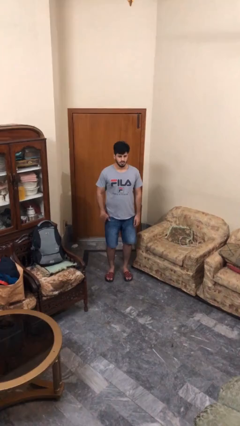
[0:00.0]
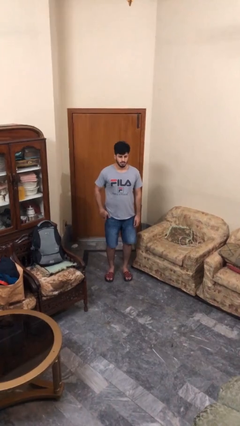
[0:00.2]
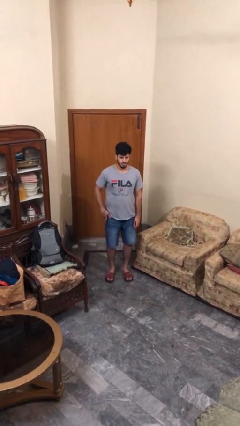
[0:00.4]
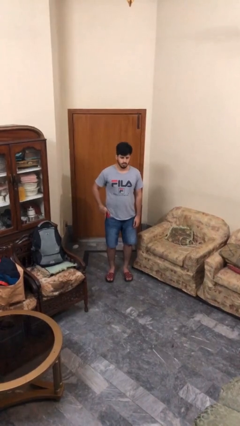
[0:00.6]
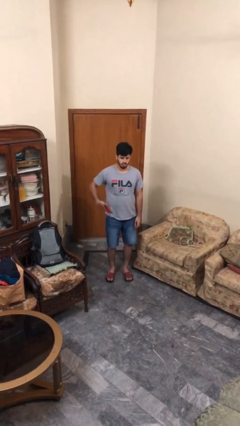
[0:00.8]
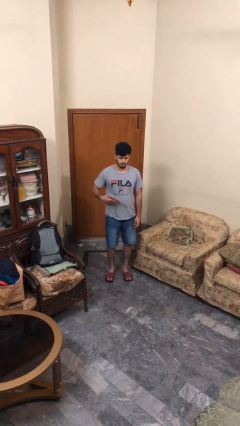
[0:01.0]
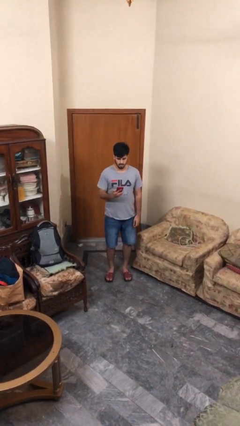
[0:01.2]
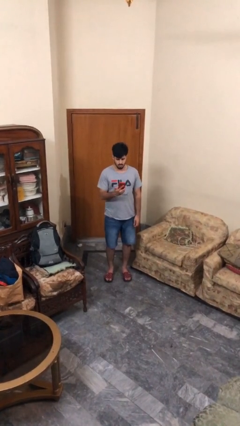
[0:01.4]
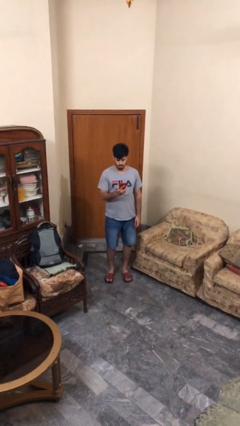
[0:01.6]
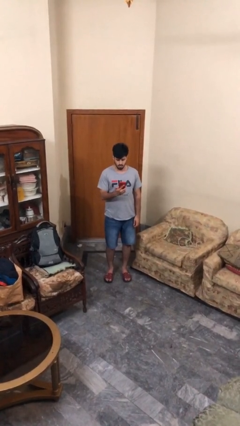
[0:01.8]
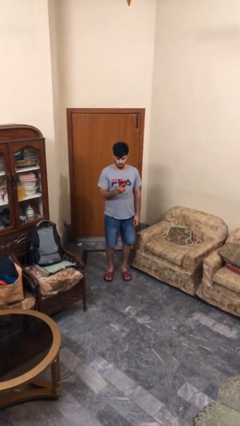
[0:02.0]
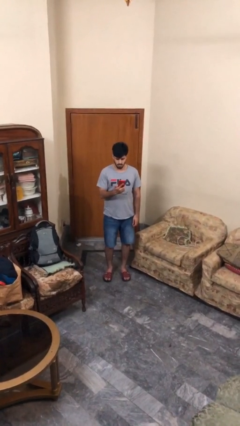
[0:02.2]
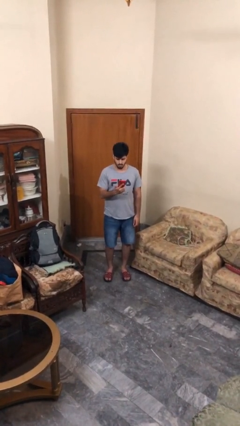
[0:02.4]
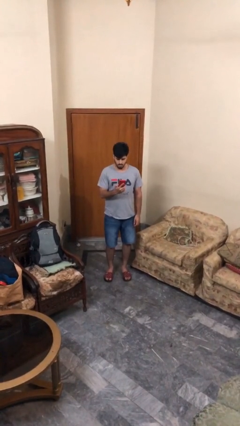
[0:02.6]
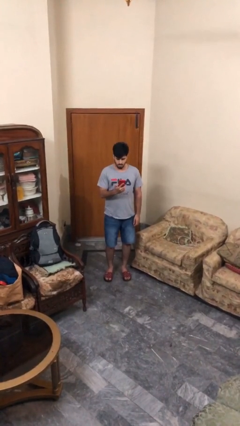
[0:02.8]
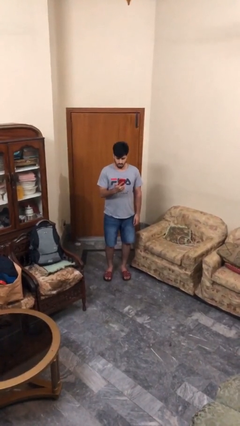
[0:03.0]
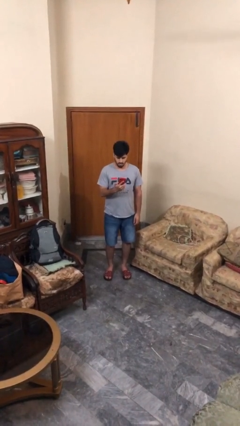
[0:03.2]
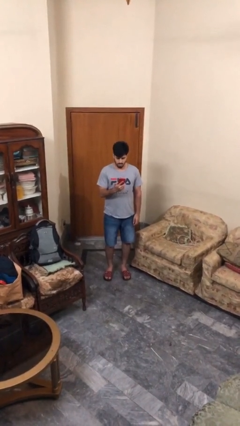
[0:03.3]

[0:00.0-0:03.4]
person takes phone from pocket

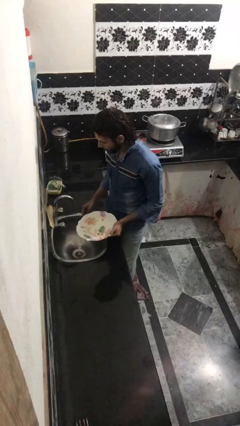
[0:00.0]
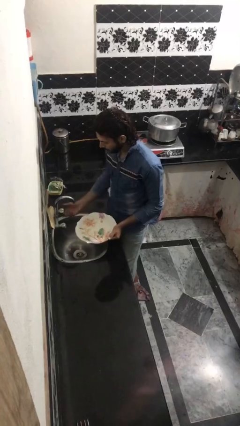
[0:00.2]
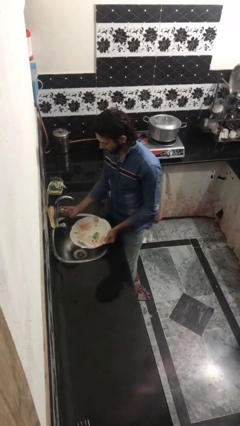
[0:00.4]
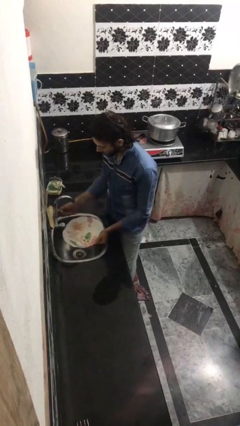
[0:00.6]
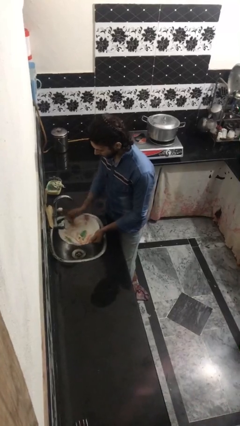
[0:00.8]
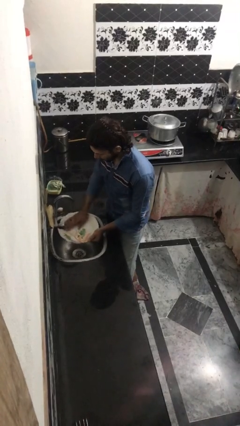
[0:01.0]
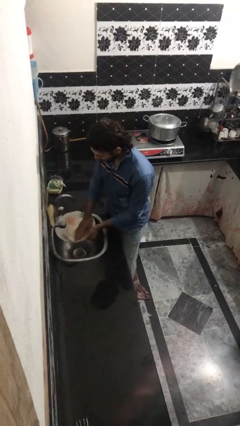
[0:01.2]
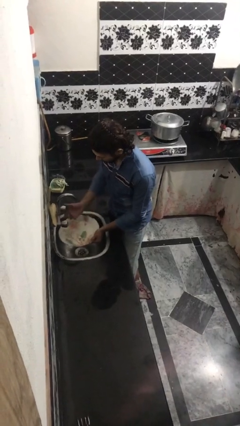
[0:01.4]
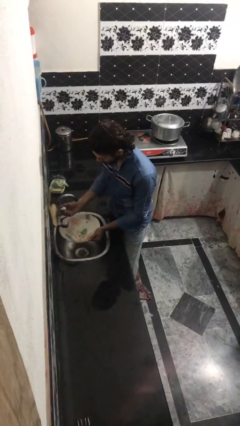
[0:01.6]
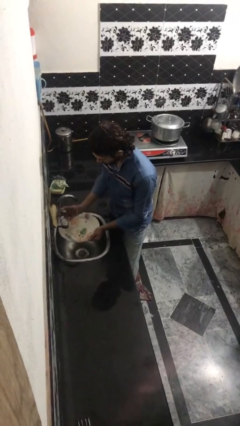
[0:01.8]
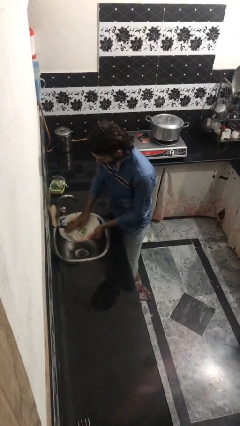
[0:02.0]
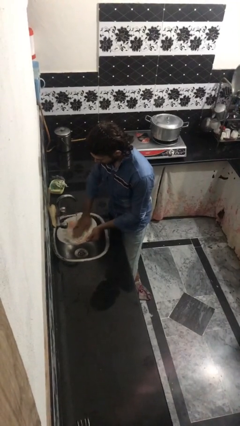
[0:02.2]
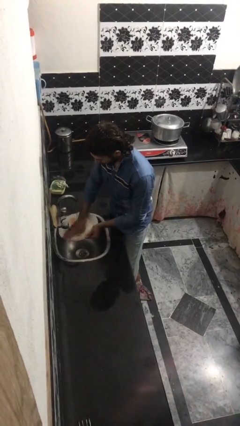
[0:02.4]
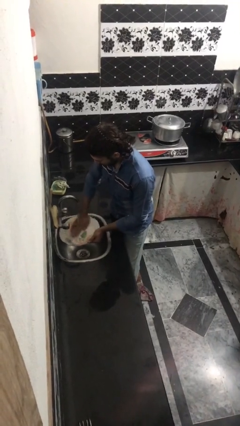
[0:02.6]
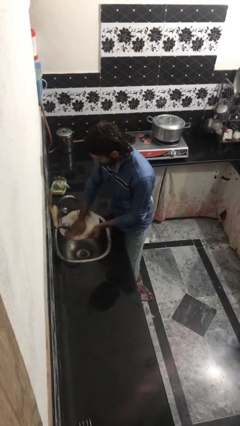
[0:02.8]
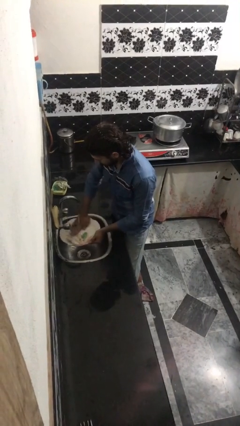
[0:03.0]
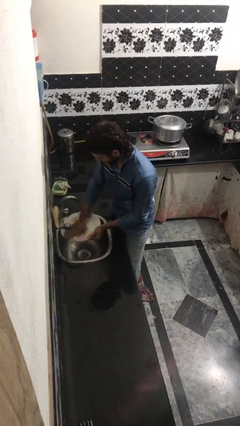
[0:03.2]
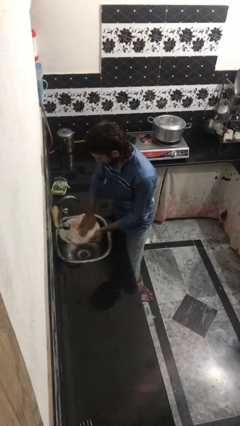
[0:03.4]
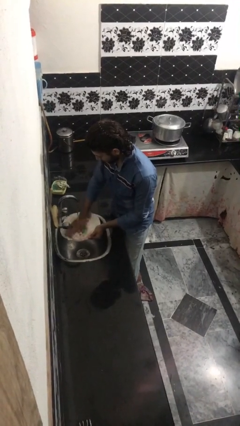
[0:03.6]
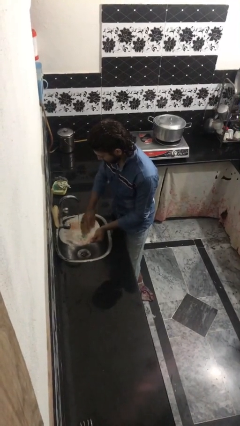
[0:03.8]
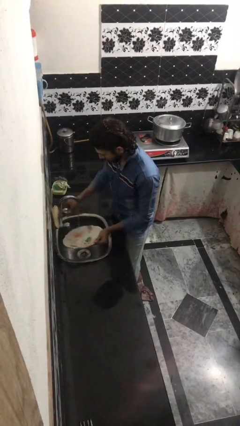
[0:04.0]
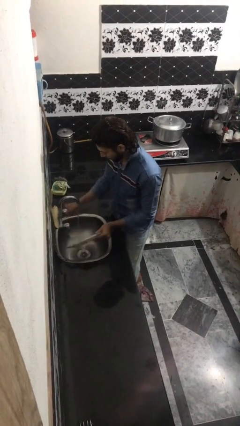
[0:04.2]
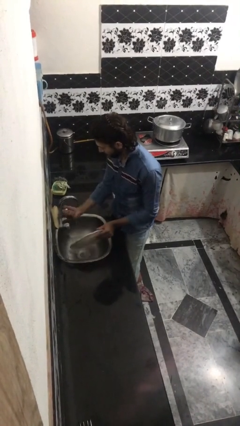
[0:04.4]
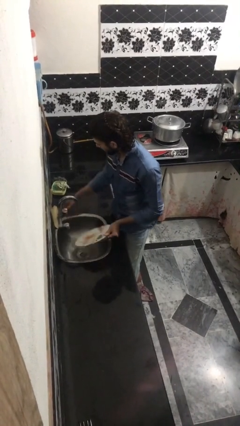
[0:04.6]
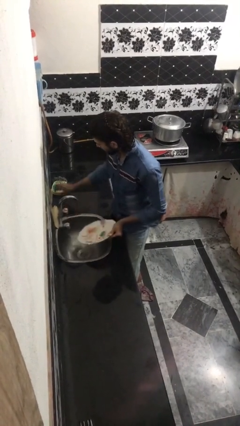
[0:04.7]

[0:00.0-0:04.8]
person washes dish

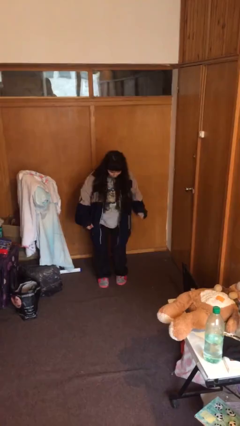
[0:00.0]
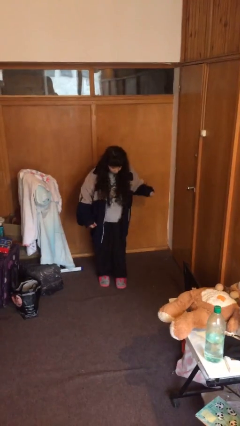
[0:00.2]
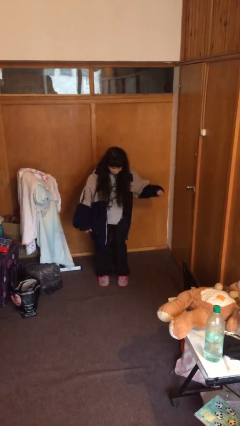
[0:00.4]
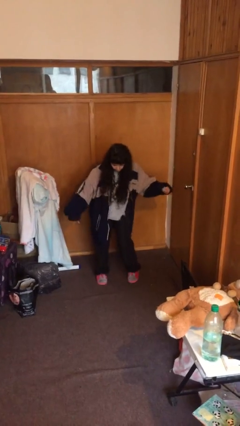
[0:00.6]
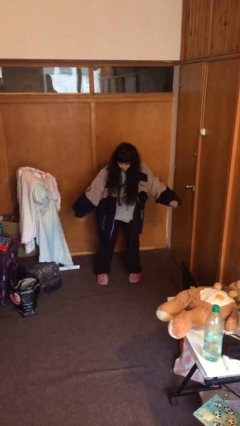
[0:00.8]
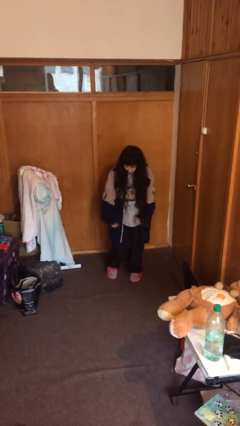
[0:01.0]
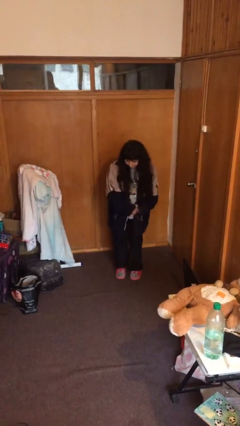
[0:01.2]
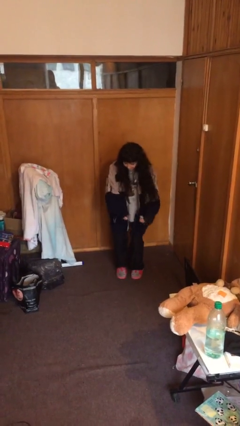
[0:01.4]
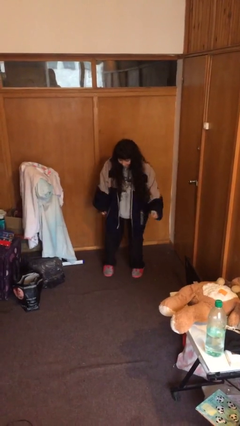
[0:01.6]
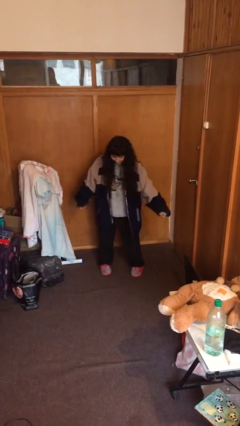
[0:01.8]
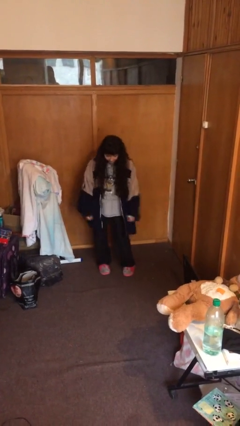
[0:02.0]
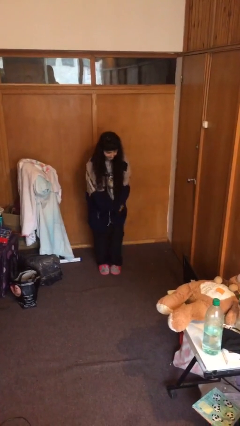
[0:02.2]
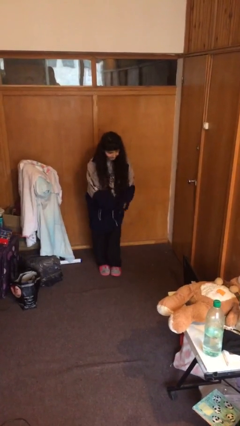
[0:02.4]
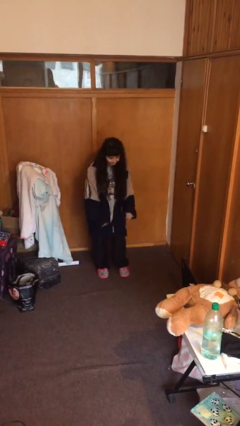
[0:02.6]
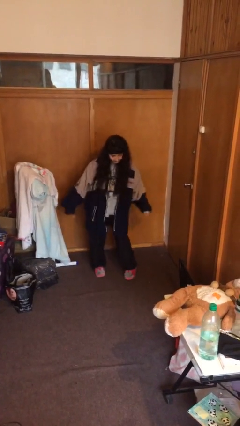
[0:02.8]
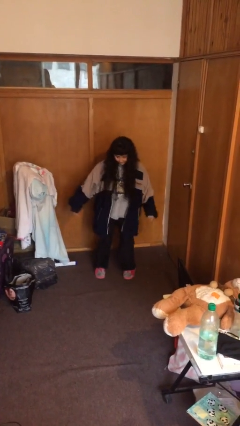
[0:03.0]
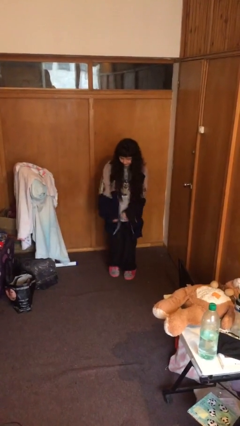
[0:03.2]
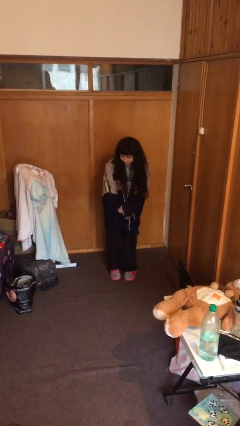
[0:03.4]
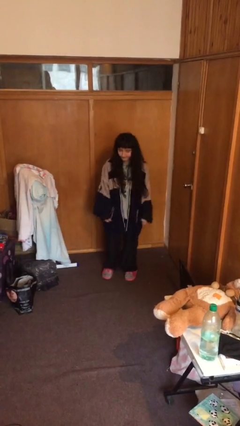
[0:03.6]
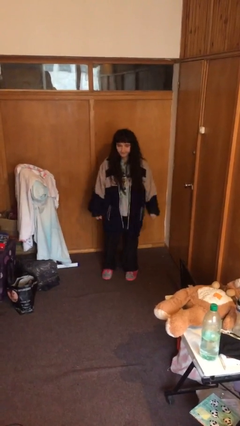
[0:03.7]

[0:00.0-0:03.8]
person dances in place

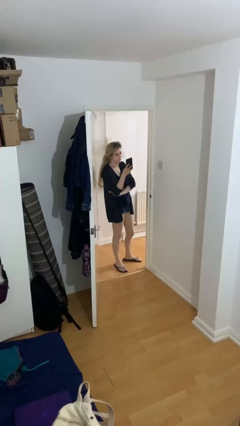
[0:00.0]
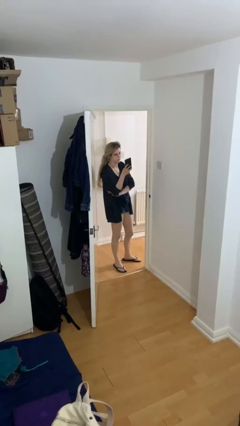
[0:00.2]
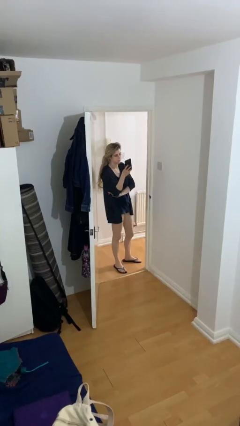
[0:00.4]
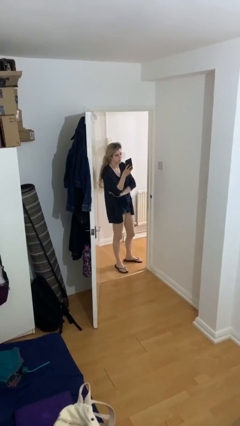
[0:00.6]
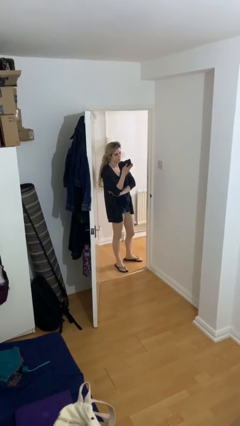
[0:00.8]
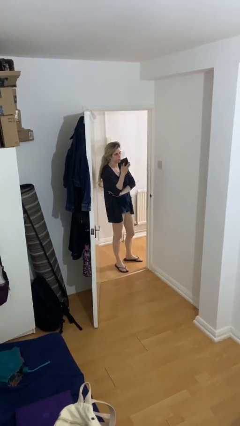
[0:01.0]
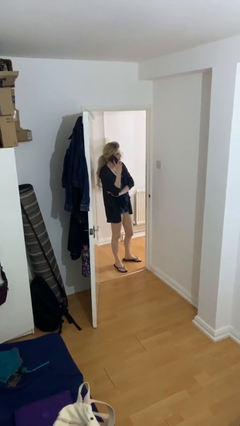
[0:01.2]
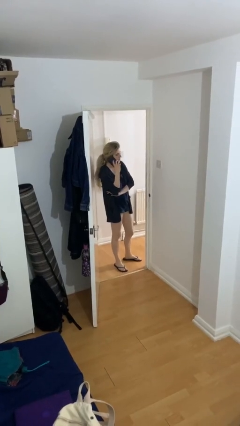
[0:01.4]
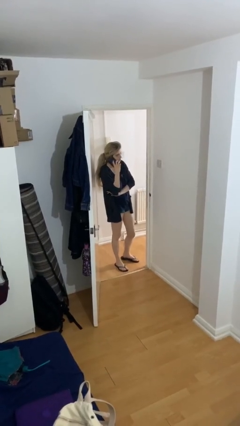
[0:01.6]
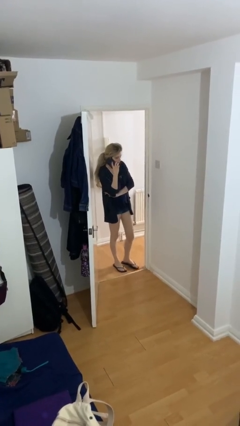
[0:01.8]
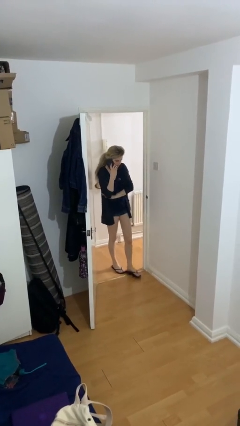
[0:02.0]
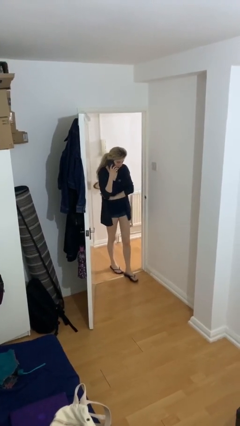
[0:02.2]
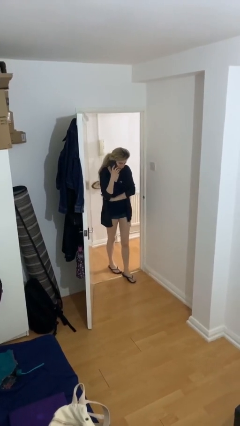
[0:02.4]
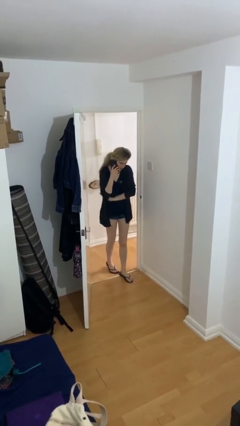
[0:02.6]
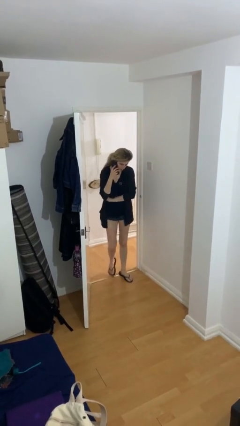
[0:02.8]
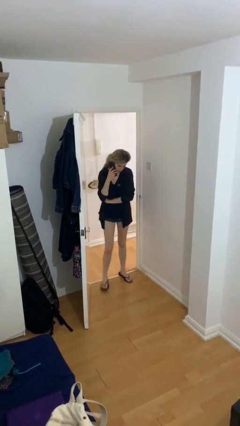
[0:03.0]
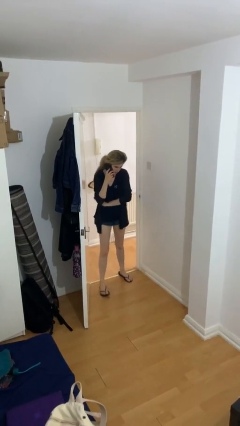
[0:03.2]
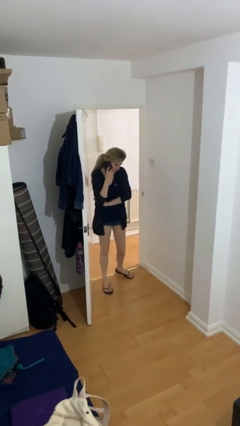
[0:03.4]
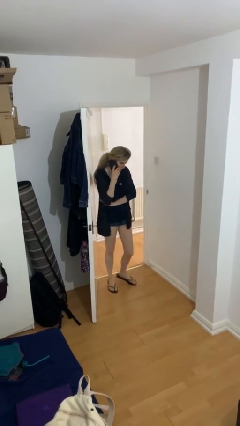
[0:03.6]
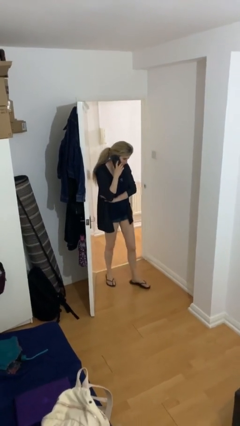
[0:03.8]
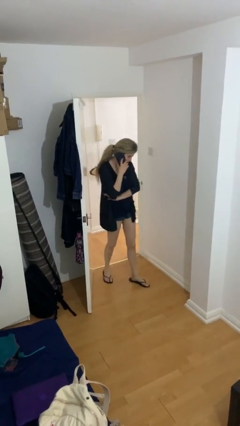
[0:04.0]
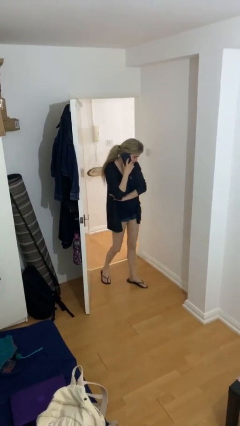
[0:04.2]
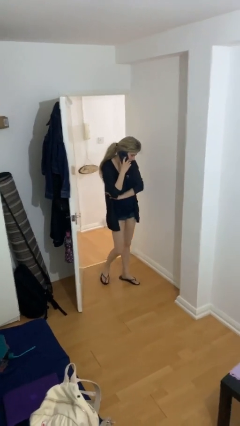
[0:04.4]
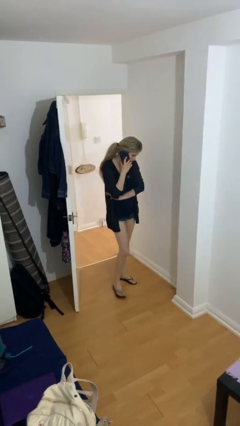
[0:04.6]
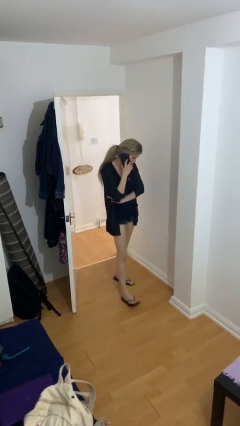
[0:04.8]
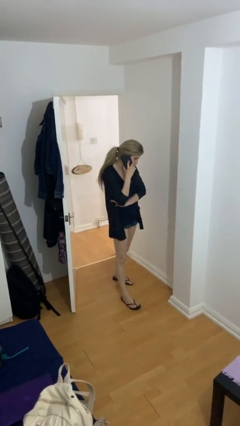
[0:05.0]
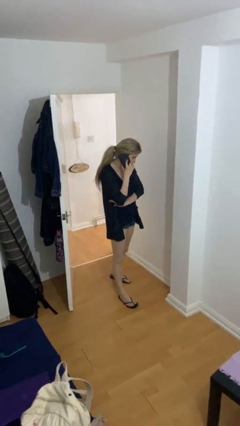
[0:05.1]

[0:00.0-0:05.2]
person enters scene through structure

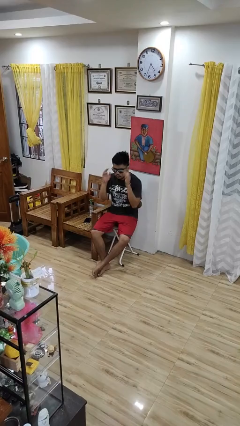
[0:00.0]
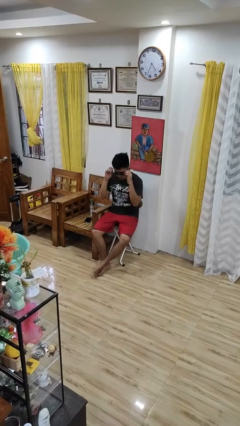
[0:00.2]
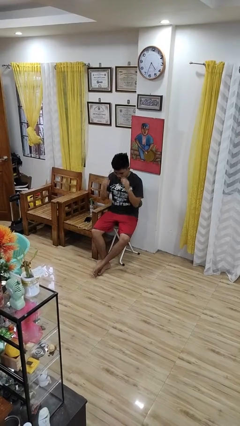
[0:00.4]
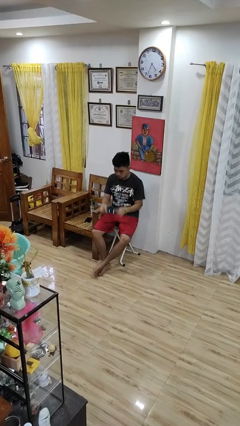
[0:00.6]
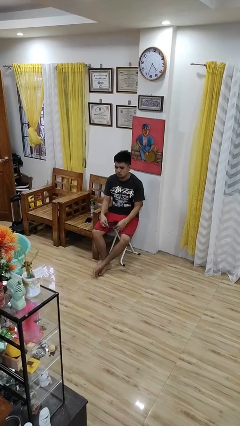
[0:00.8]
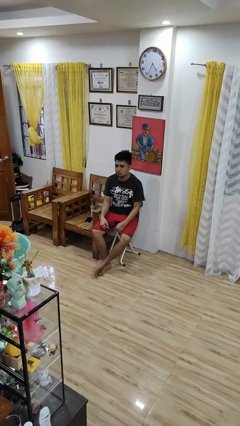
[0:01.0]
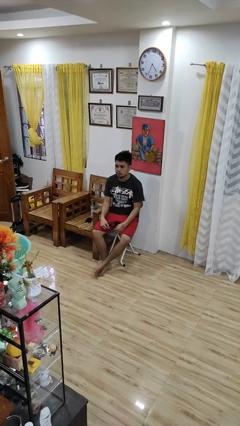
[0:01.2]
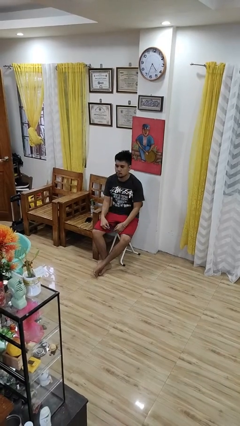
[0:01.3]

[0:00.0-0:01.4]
person takes off sunglasses
